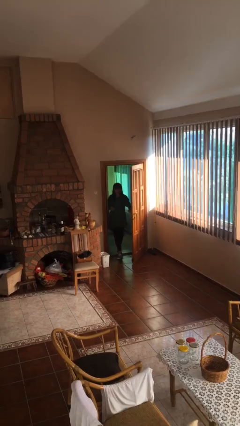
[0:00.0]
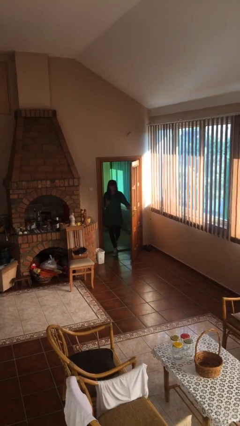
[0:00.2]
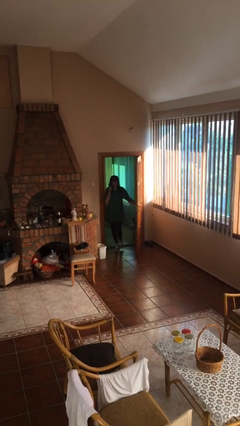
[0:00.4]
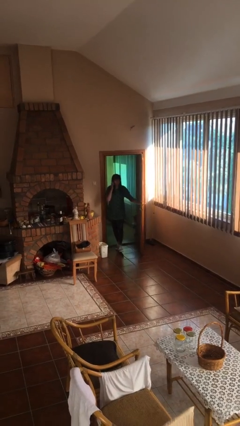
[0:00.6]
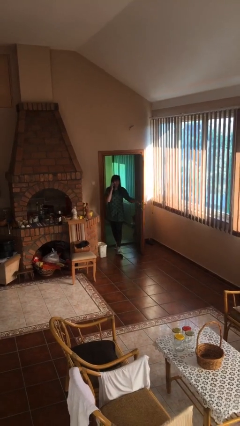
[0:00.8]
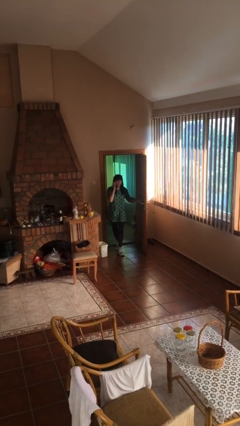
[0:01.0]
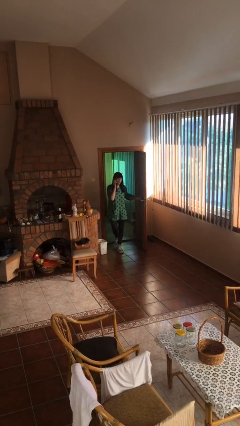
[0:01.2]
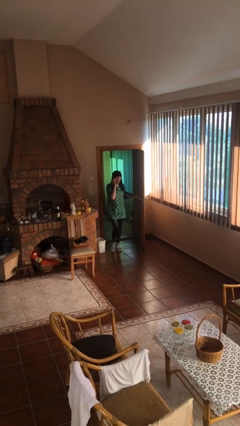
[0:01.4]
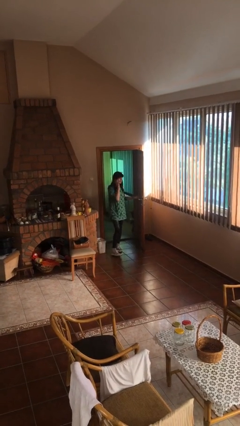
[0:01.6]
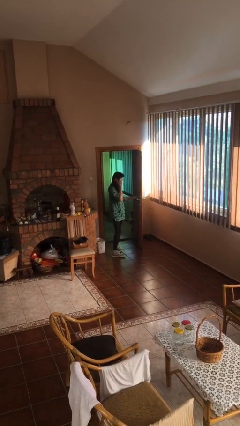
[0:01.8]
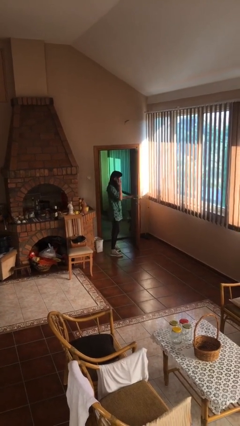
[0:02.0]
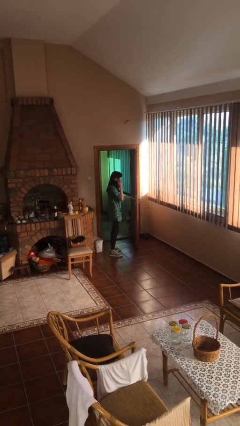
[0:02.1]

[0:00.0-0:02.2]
person enters scene through structure

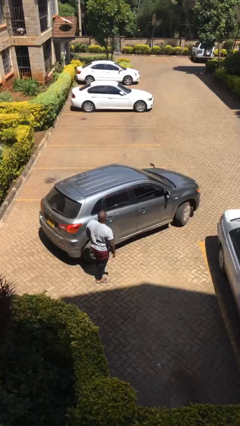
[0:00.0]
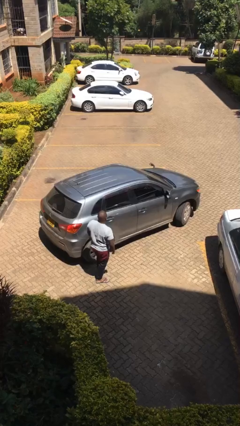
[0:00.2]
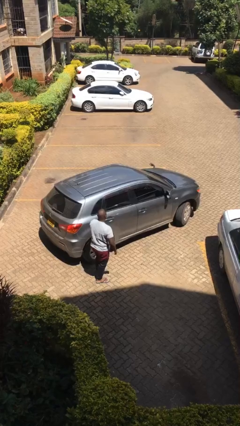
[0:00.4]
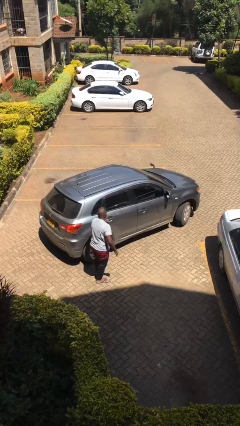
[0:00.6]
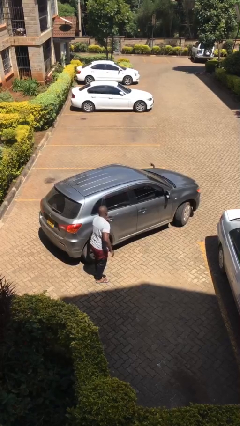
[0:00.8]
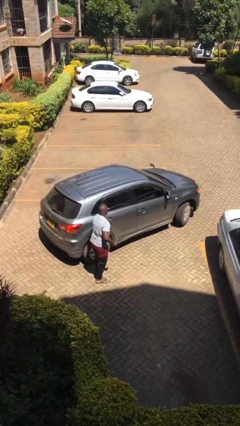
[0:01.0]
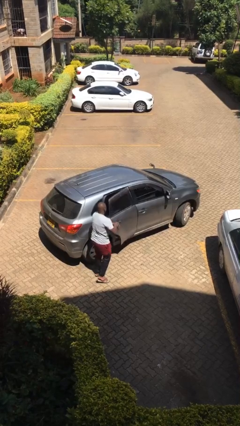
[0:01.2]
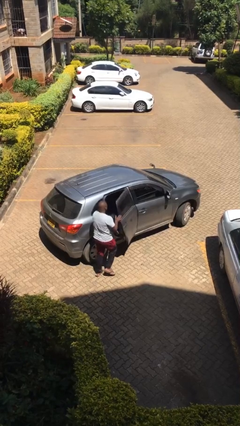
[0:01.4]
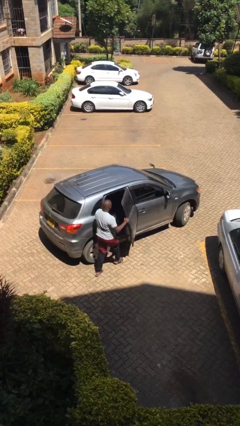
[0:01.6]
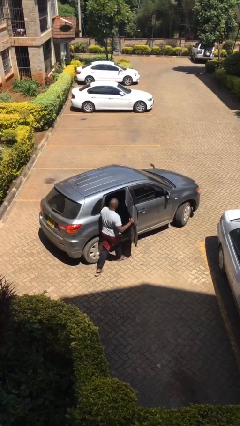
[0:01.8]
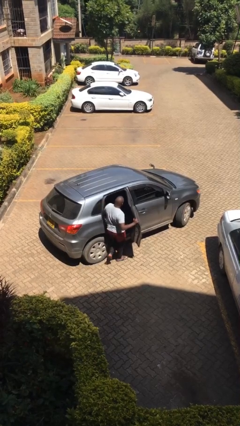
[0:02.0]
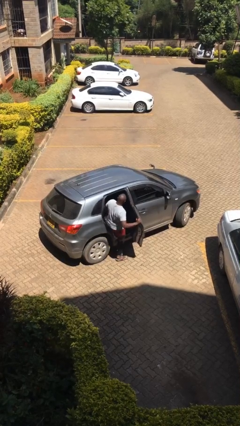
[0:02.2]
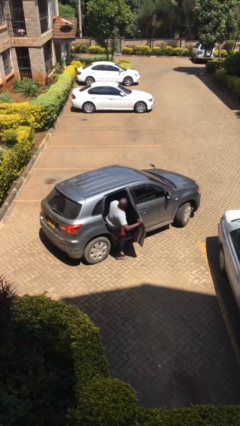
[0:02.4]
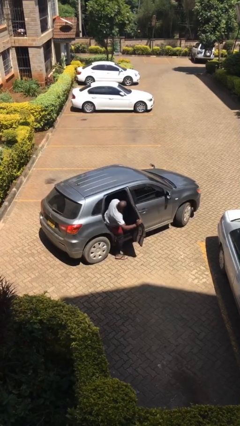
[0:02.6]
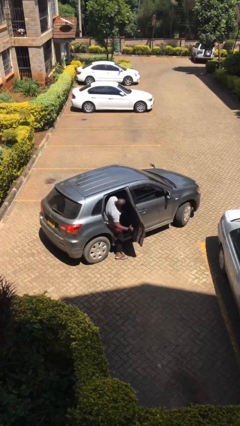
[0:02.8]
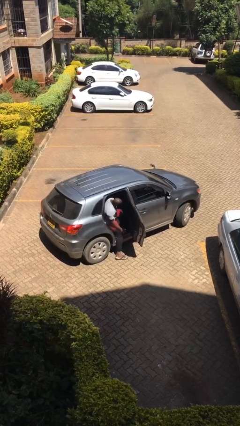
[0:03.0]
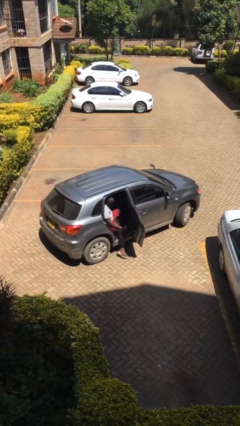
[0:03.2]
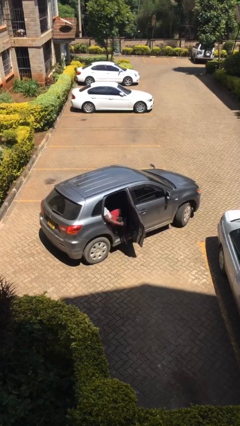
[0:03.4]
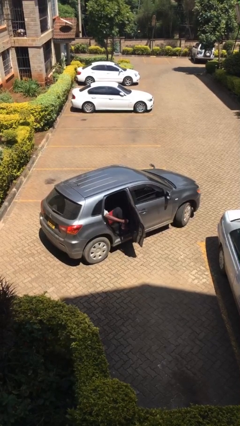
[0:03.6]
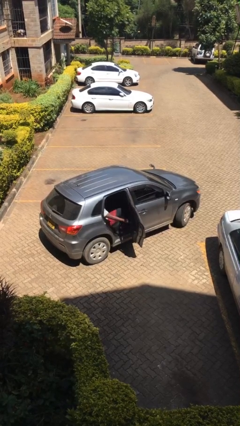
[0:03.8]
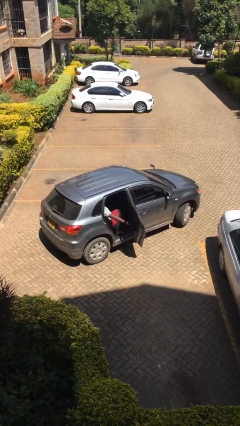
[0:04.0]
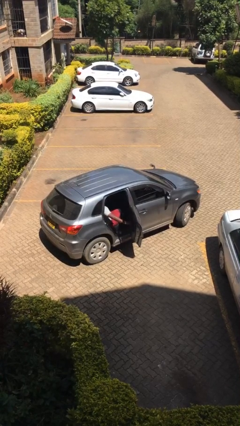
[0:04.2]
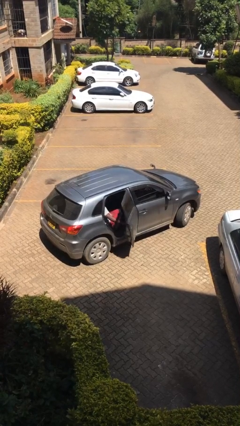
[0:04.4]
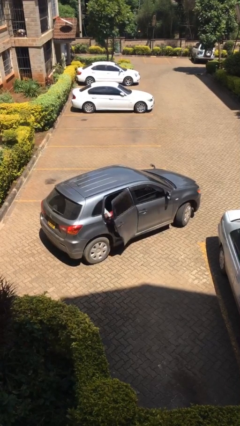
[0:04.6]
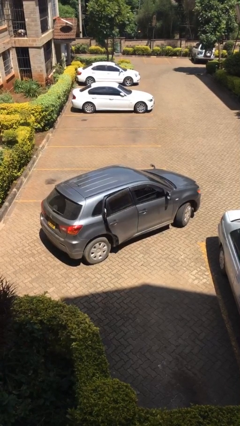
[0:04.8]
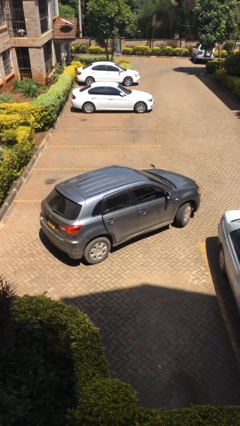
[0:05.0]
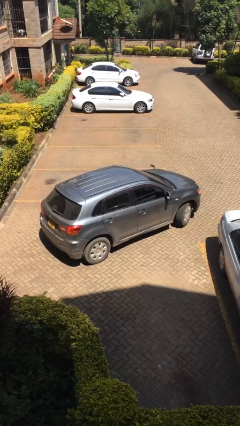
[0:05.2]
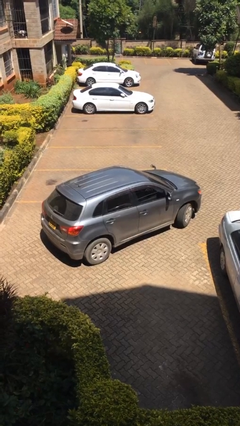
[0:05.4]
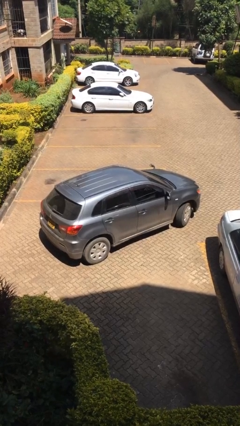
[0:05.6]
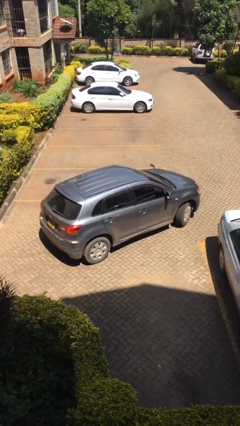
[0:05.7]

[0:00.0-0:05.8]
car picks up person

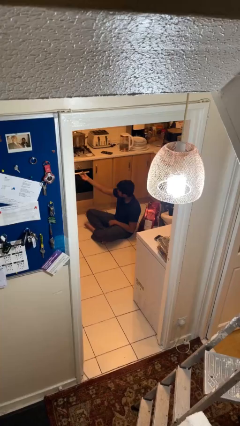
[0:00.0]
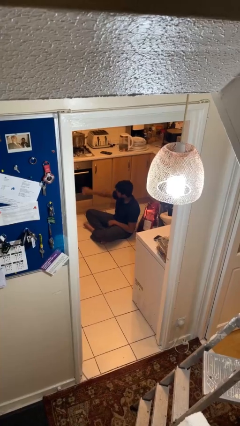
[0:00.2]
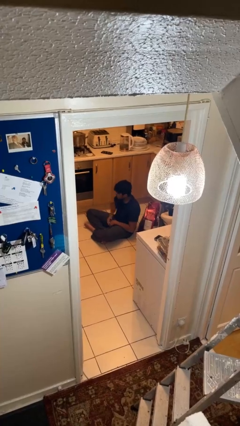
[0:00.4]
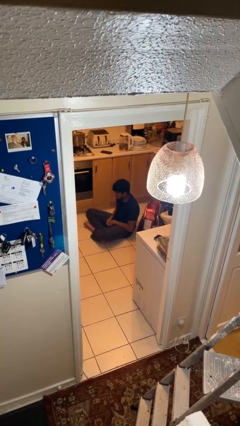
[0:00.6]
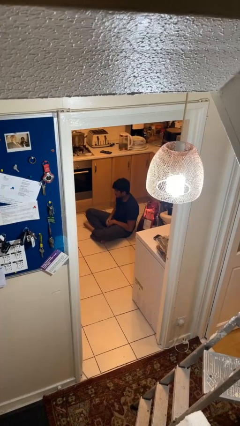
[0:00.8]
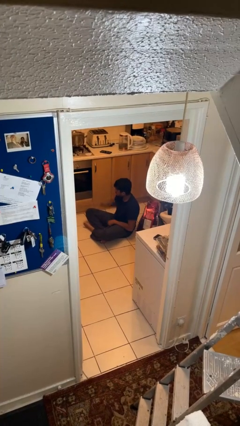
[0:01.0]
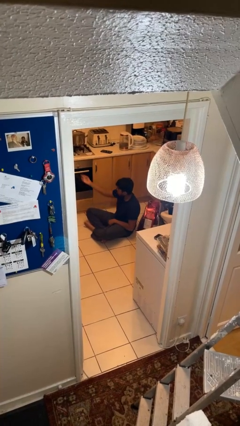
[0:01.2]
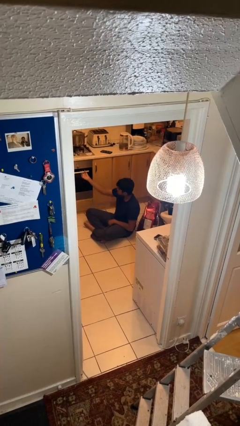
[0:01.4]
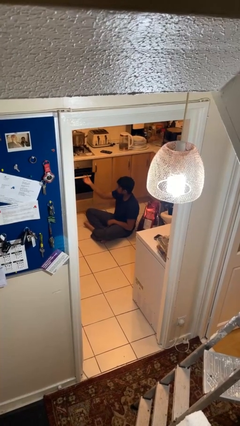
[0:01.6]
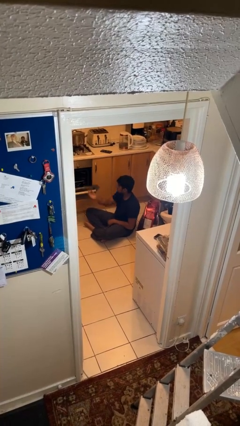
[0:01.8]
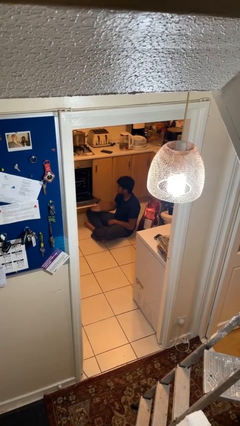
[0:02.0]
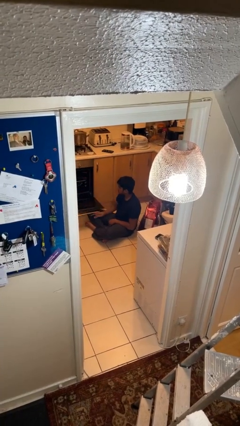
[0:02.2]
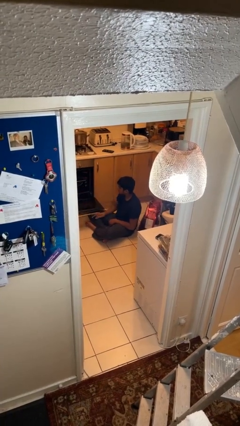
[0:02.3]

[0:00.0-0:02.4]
person opens oven door

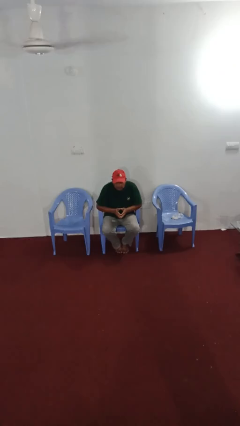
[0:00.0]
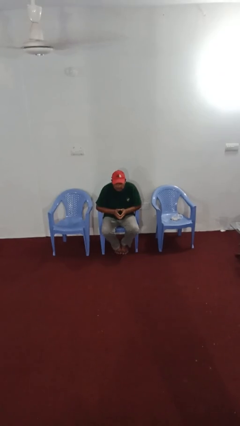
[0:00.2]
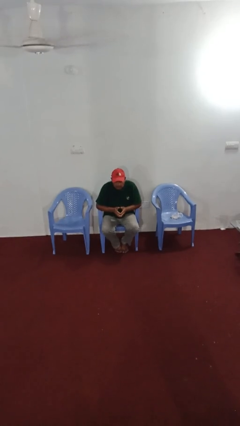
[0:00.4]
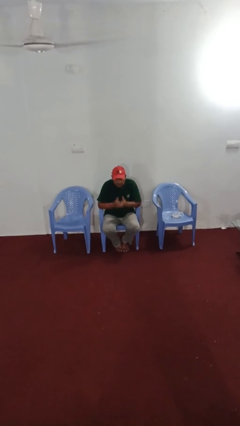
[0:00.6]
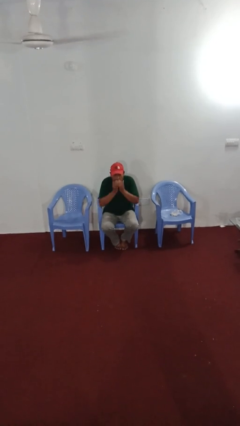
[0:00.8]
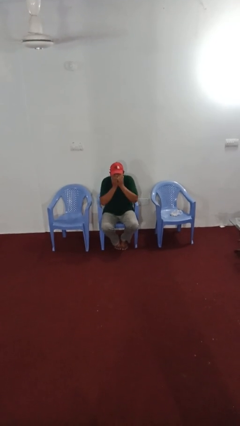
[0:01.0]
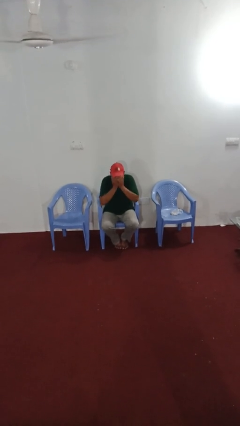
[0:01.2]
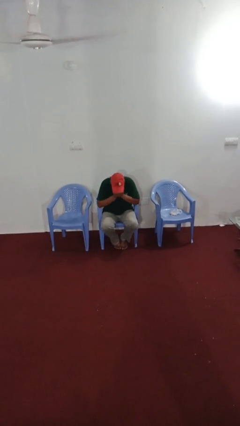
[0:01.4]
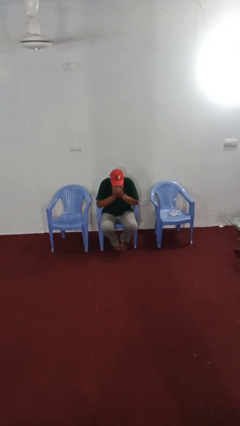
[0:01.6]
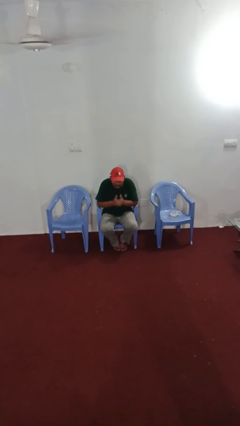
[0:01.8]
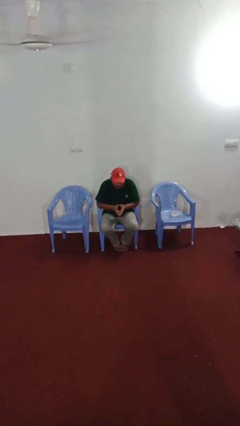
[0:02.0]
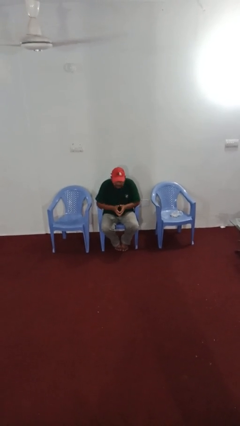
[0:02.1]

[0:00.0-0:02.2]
person sneezes into hand

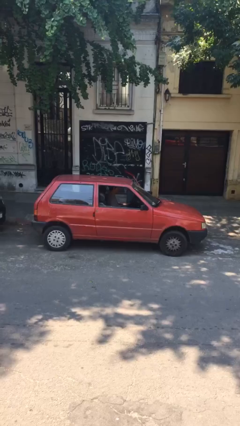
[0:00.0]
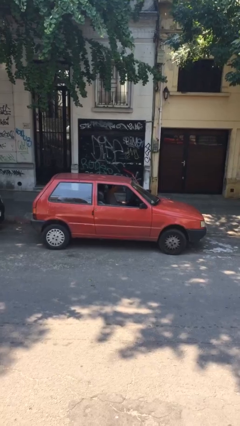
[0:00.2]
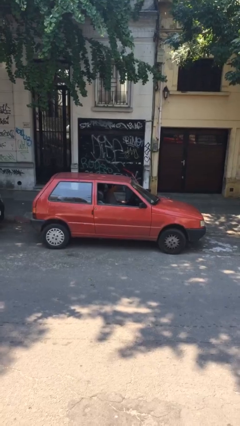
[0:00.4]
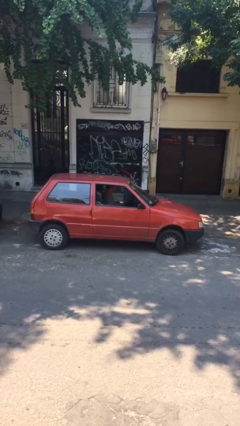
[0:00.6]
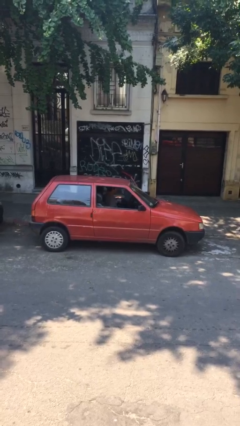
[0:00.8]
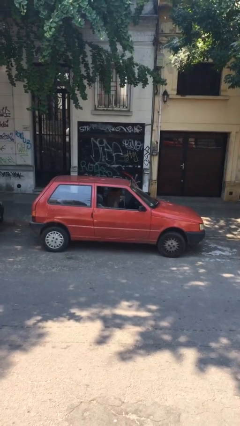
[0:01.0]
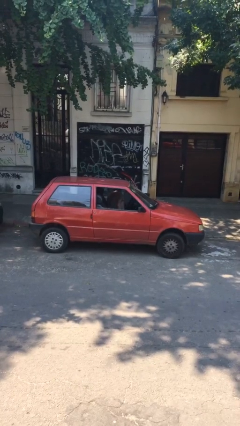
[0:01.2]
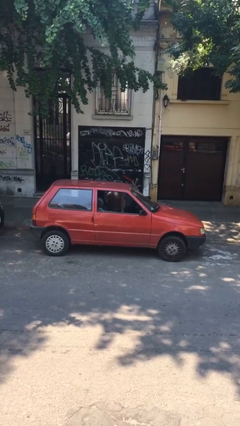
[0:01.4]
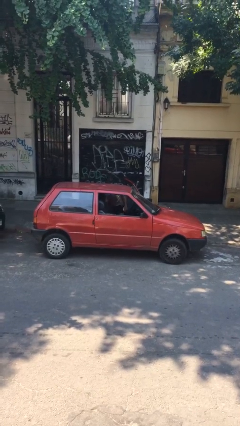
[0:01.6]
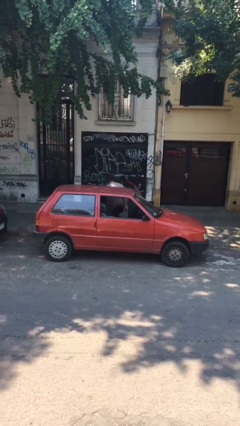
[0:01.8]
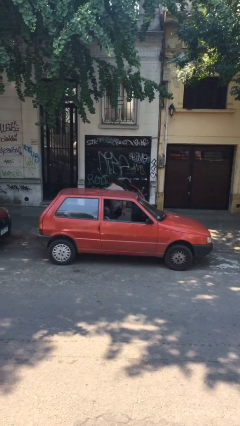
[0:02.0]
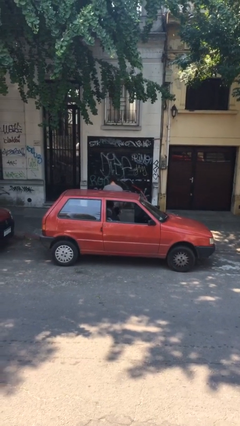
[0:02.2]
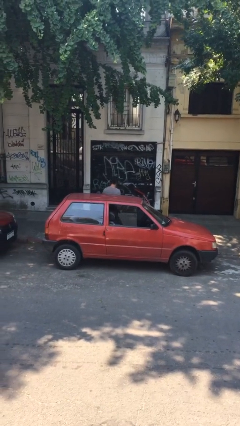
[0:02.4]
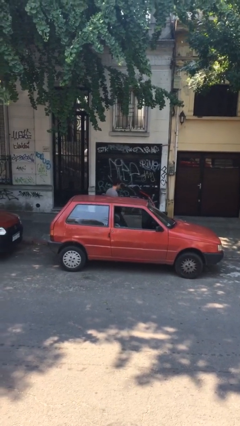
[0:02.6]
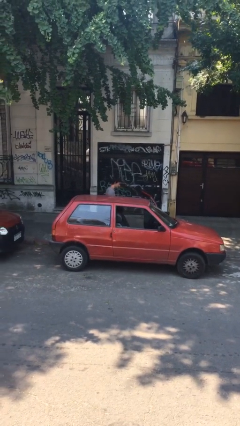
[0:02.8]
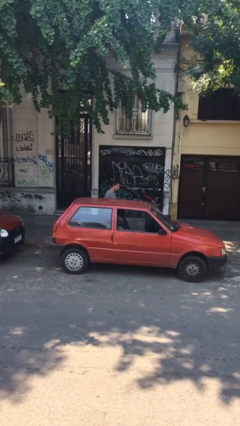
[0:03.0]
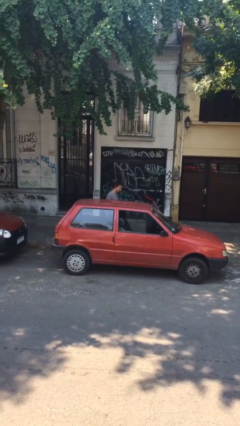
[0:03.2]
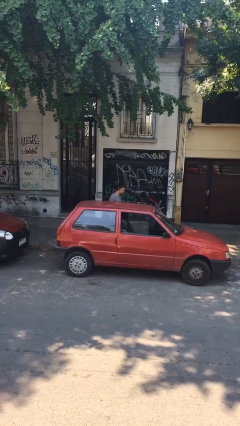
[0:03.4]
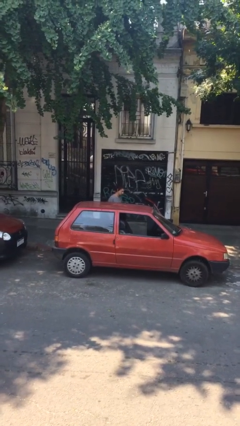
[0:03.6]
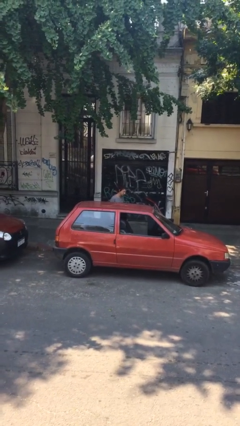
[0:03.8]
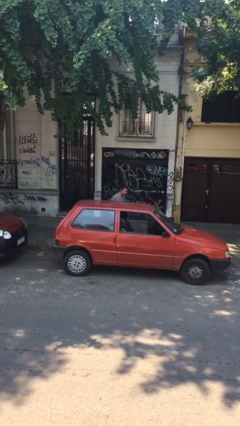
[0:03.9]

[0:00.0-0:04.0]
person exits car

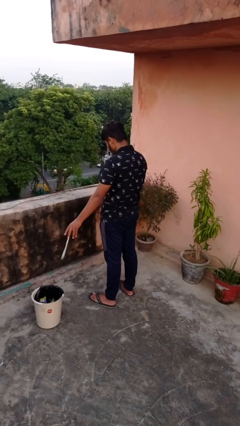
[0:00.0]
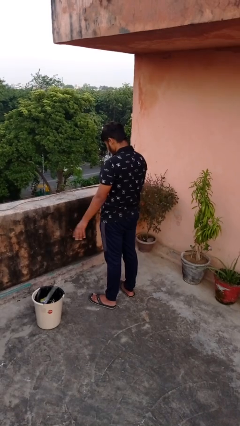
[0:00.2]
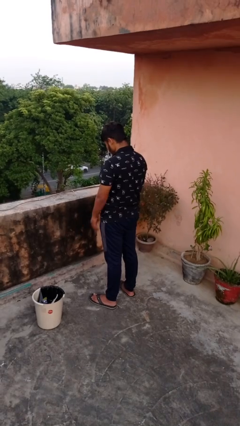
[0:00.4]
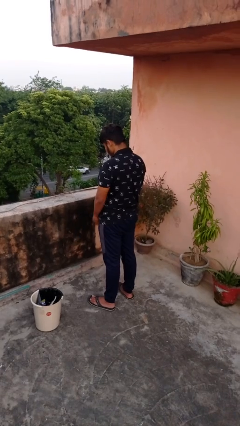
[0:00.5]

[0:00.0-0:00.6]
person discards trash

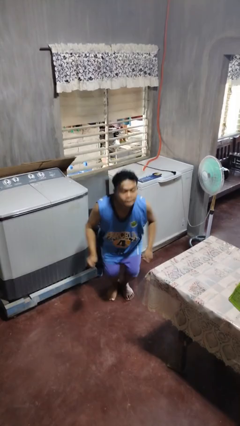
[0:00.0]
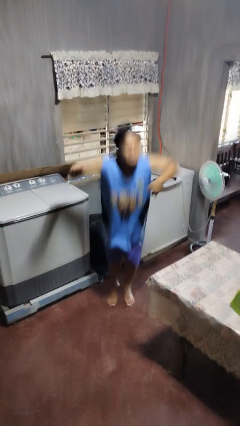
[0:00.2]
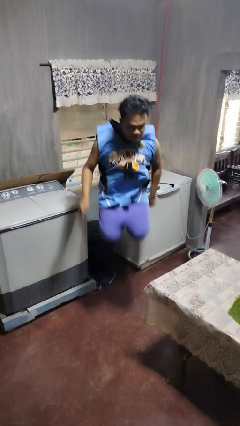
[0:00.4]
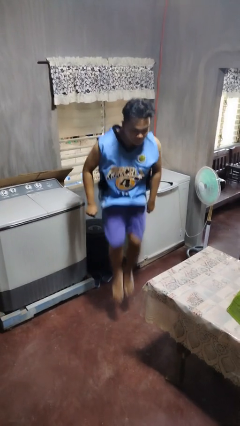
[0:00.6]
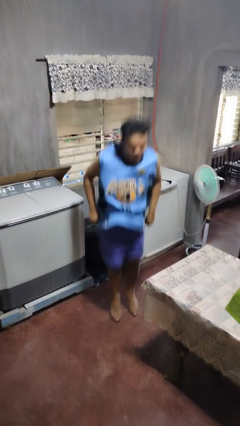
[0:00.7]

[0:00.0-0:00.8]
person jumps
